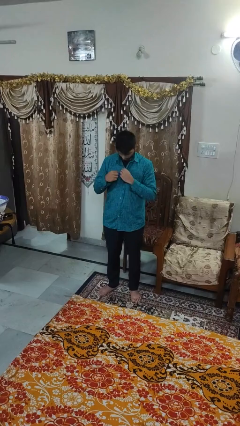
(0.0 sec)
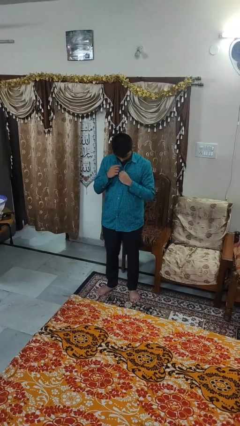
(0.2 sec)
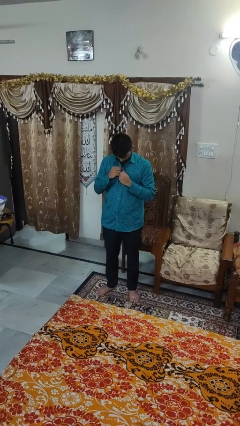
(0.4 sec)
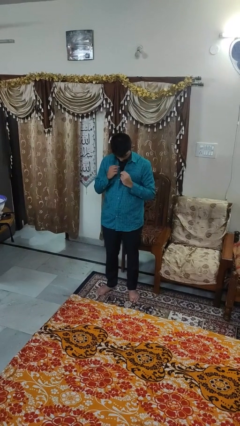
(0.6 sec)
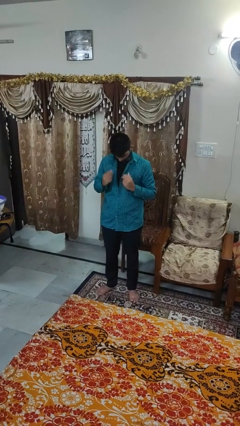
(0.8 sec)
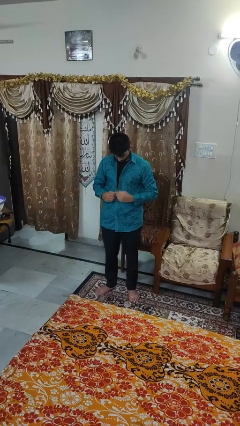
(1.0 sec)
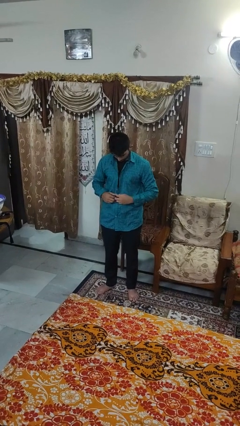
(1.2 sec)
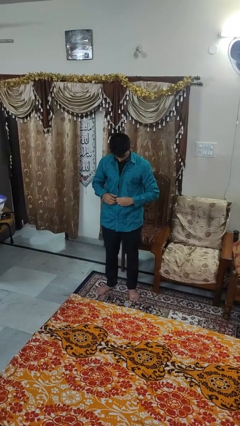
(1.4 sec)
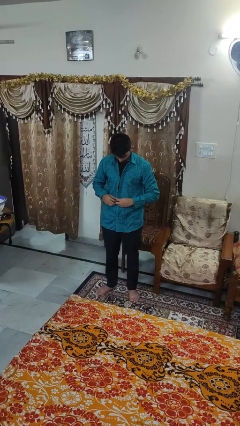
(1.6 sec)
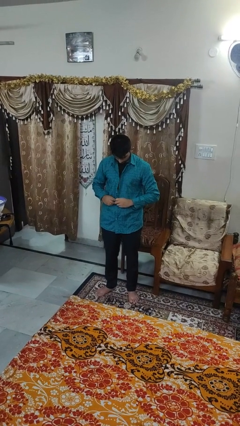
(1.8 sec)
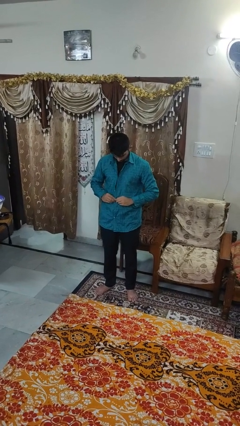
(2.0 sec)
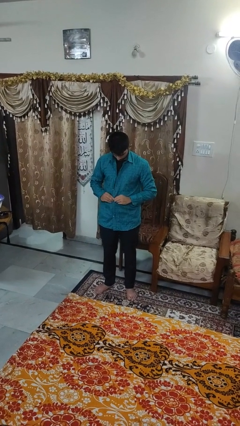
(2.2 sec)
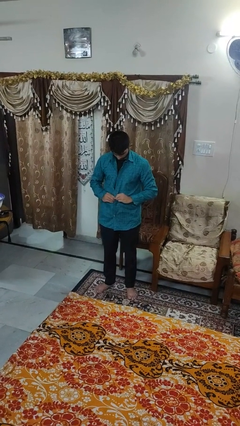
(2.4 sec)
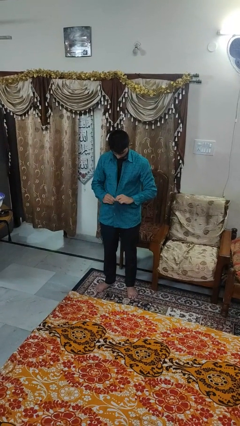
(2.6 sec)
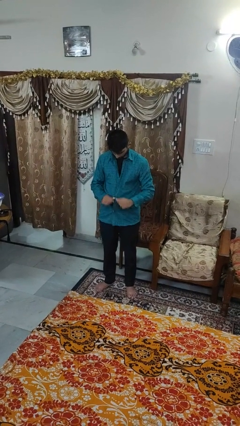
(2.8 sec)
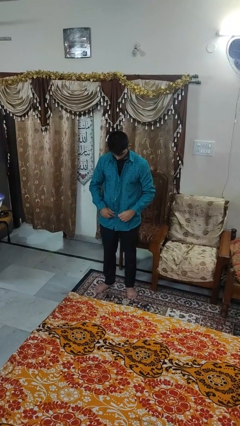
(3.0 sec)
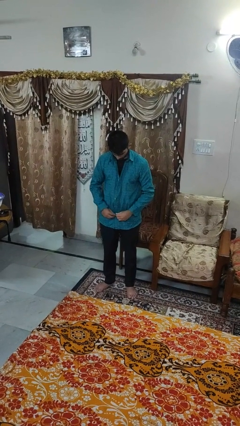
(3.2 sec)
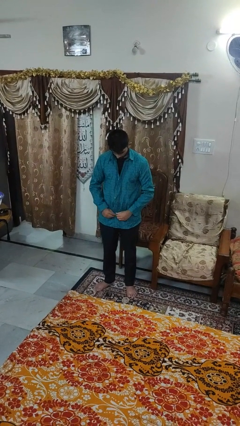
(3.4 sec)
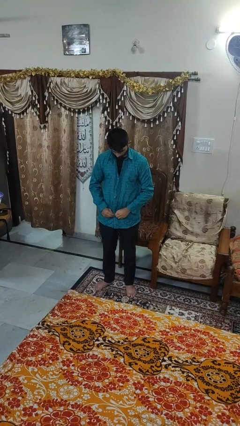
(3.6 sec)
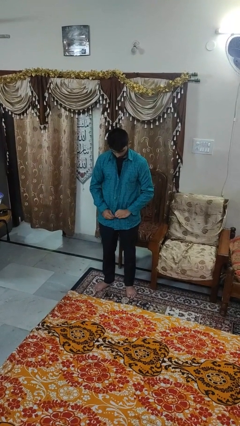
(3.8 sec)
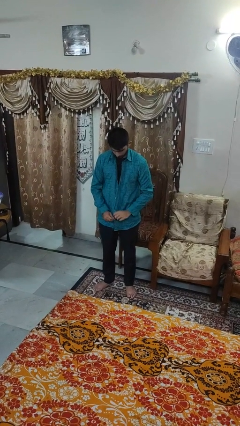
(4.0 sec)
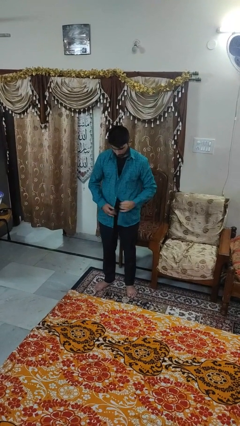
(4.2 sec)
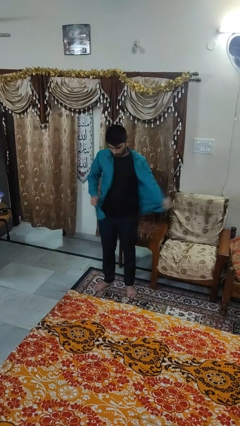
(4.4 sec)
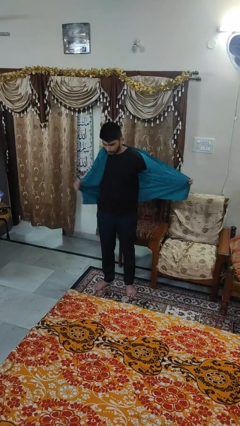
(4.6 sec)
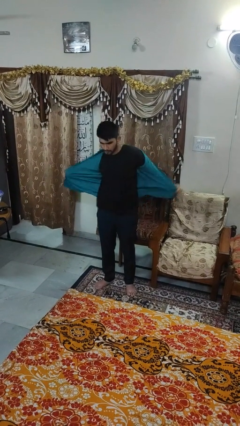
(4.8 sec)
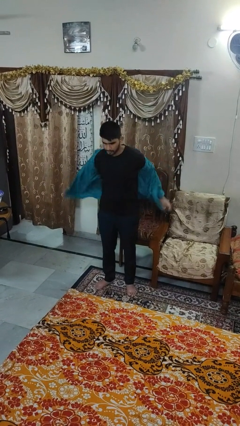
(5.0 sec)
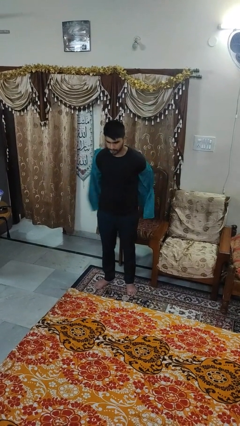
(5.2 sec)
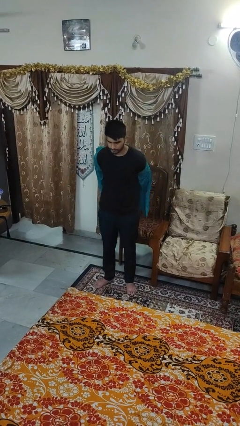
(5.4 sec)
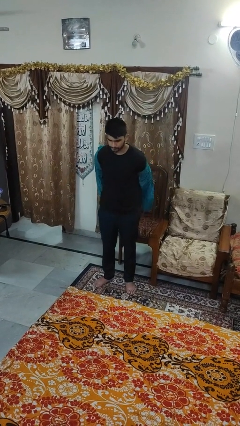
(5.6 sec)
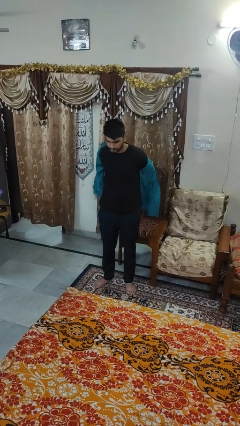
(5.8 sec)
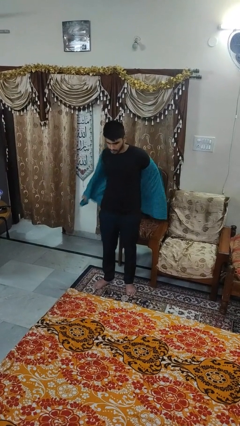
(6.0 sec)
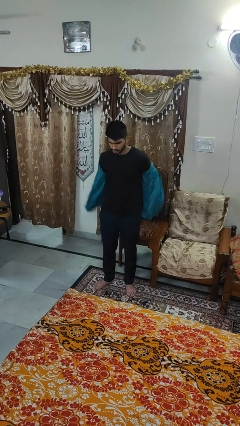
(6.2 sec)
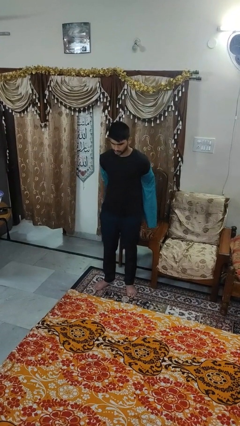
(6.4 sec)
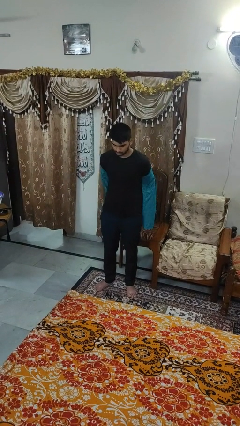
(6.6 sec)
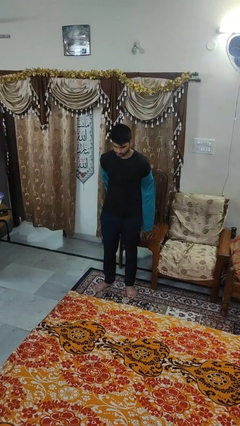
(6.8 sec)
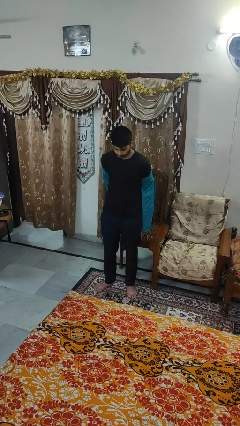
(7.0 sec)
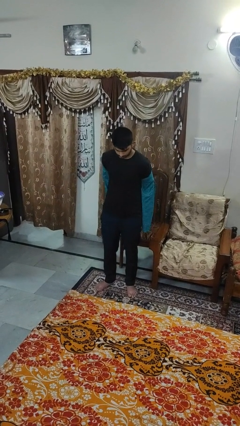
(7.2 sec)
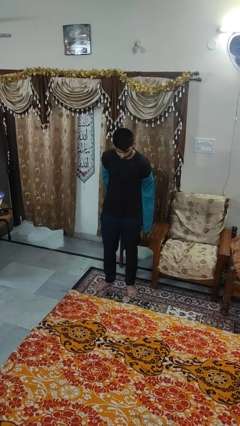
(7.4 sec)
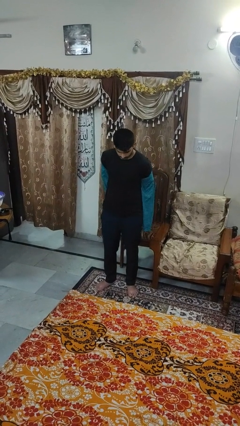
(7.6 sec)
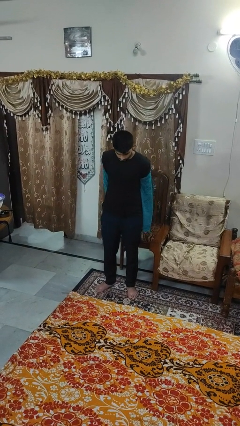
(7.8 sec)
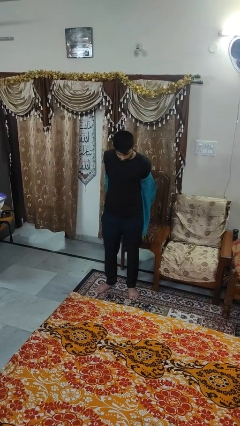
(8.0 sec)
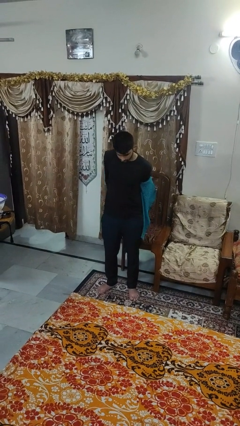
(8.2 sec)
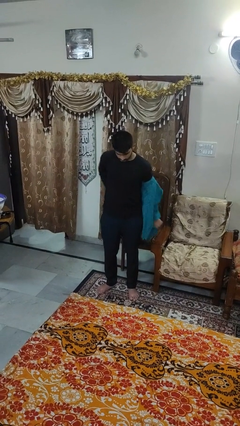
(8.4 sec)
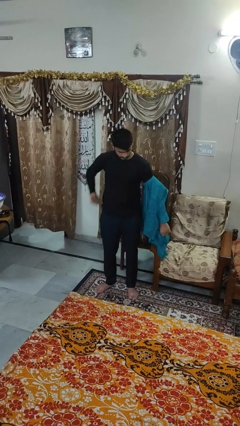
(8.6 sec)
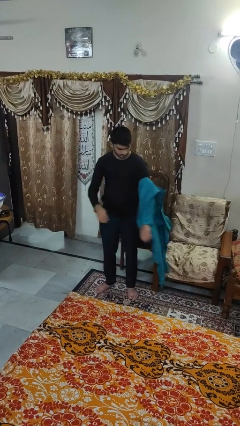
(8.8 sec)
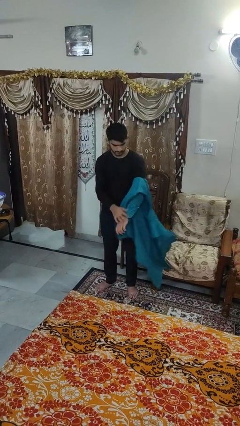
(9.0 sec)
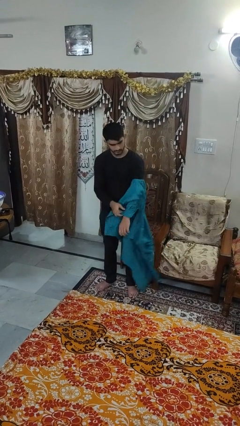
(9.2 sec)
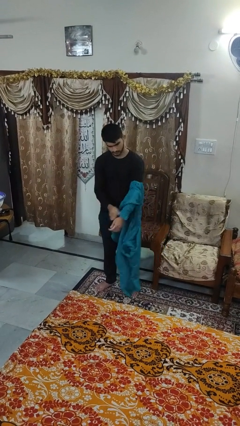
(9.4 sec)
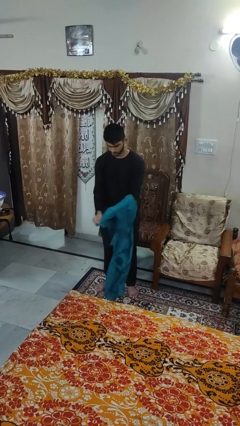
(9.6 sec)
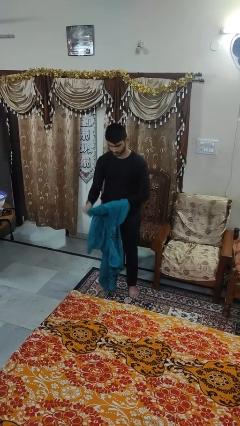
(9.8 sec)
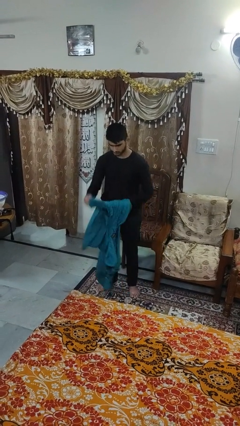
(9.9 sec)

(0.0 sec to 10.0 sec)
person takes off shirt

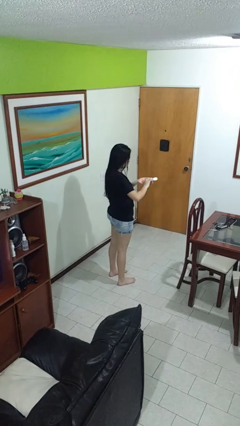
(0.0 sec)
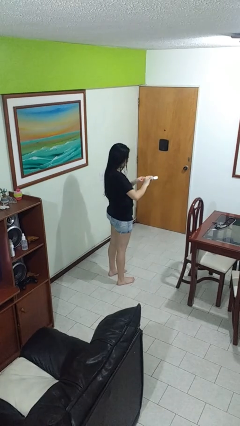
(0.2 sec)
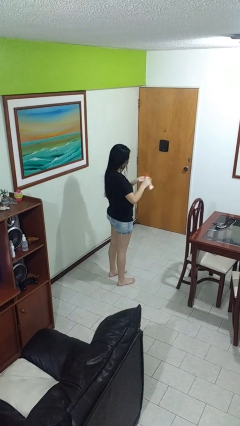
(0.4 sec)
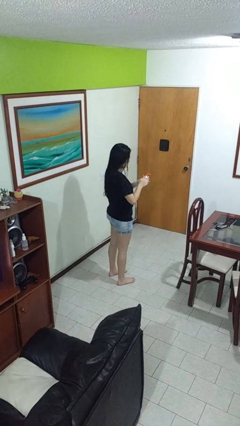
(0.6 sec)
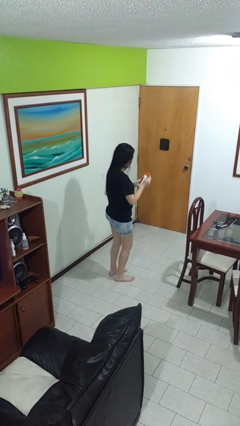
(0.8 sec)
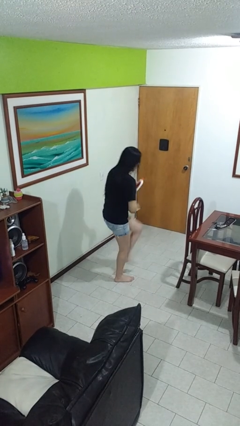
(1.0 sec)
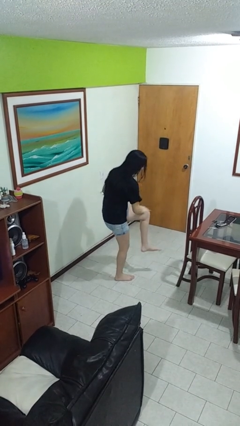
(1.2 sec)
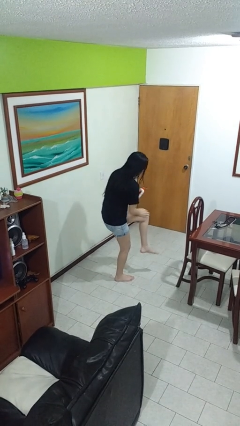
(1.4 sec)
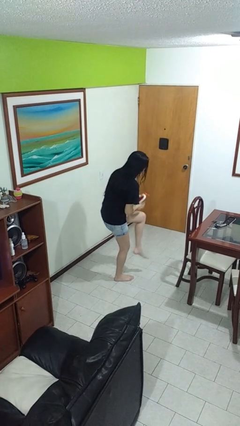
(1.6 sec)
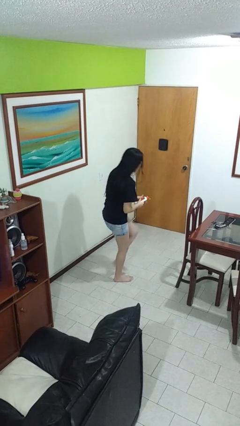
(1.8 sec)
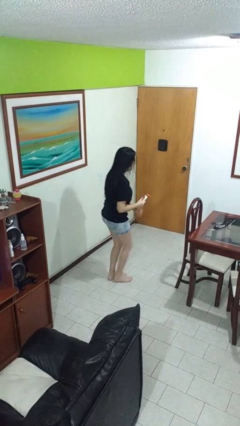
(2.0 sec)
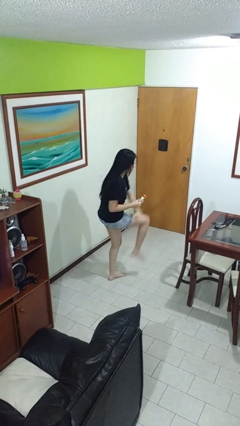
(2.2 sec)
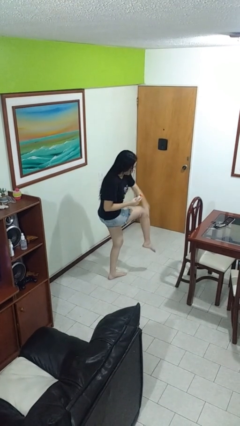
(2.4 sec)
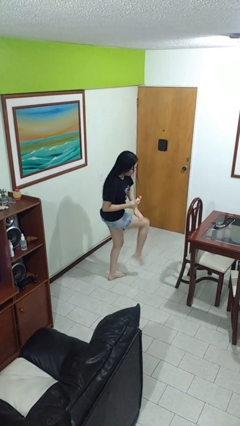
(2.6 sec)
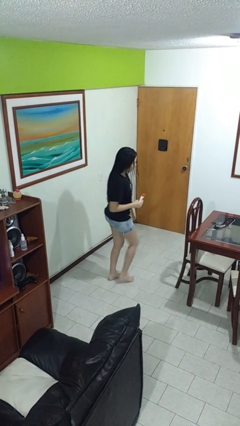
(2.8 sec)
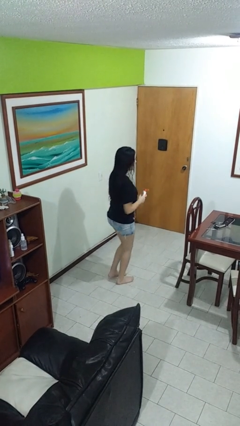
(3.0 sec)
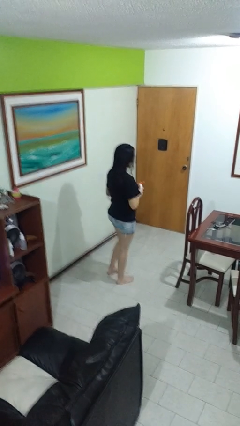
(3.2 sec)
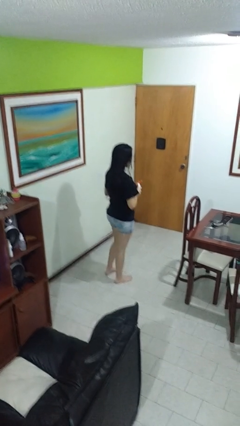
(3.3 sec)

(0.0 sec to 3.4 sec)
person applies sunscreen

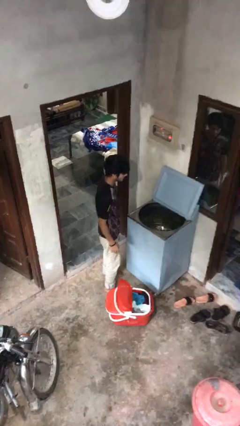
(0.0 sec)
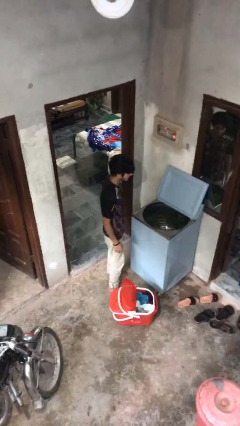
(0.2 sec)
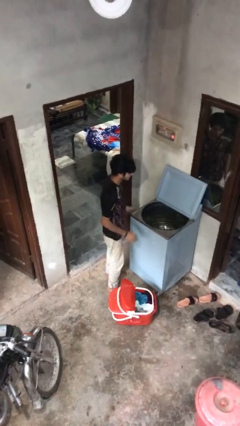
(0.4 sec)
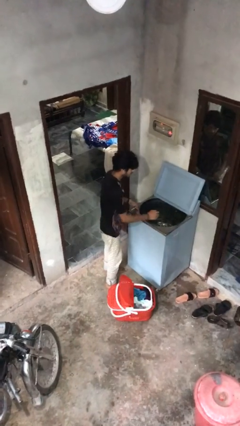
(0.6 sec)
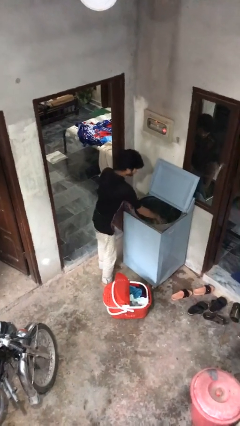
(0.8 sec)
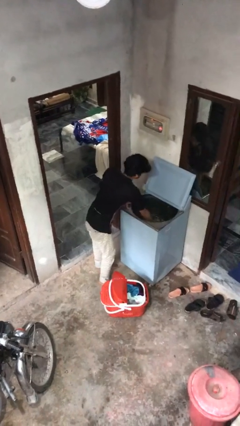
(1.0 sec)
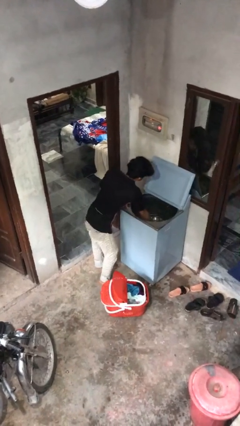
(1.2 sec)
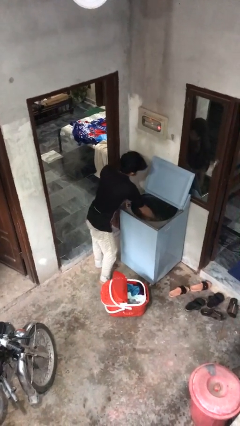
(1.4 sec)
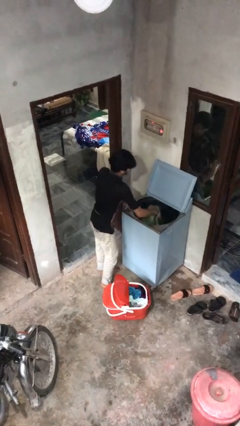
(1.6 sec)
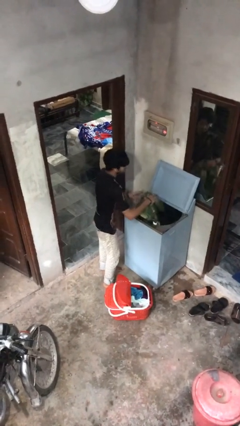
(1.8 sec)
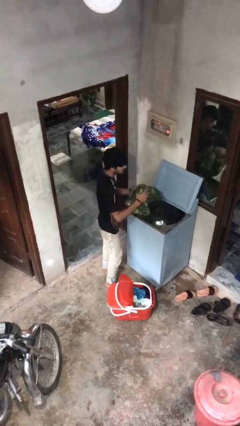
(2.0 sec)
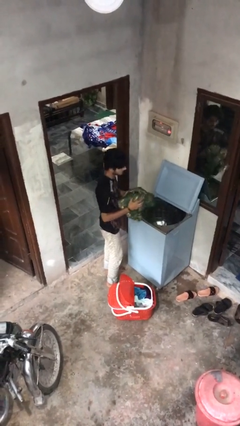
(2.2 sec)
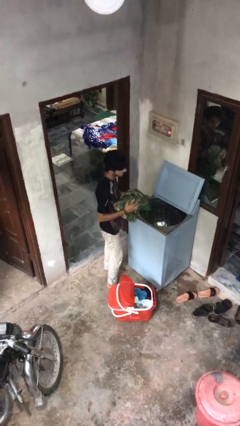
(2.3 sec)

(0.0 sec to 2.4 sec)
person unloads clotheswasher

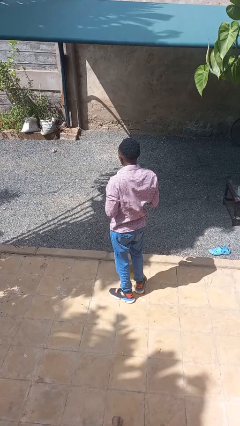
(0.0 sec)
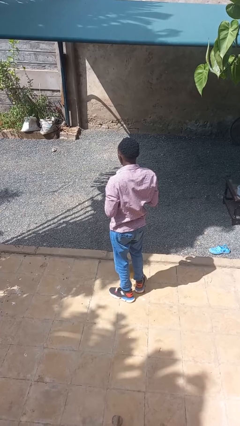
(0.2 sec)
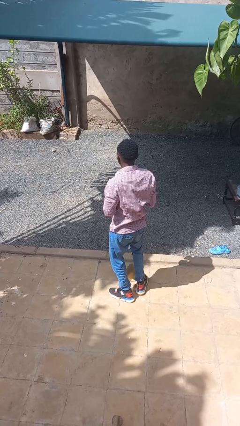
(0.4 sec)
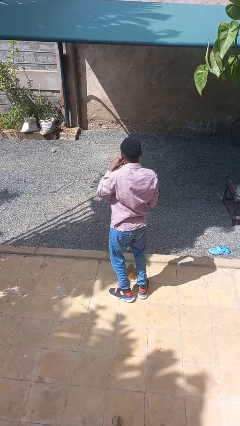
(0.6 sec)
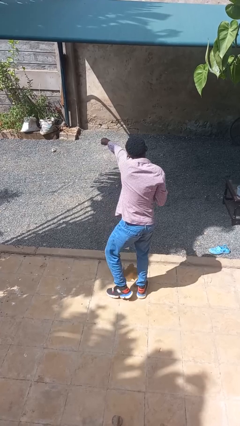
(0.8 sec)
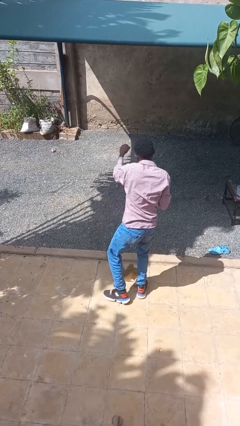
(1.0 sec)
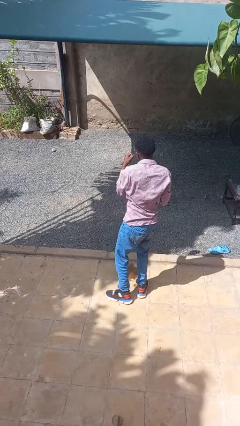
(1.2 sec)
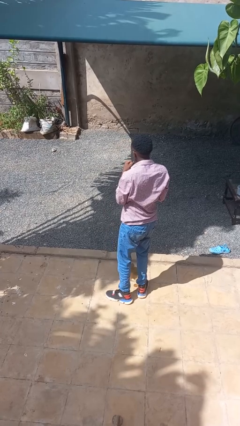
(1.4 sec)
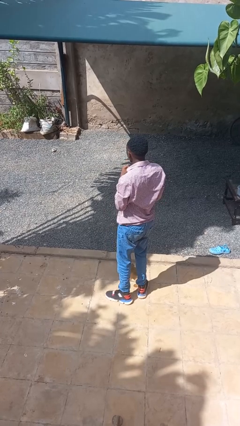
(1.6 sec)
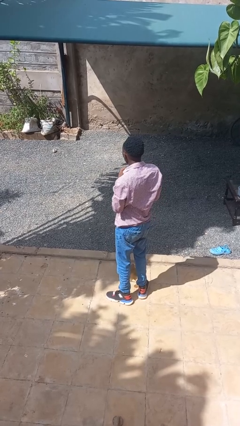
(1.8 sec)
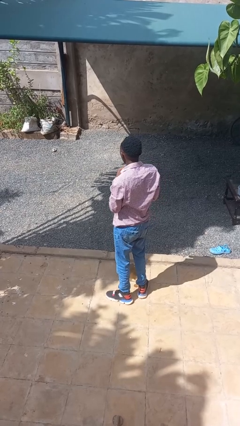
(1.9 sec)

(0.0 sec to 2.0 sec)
person punches
